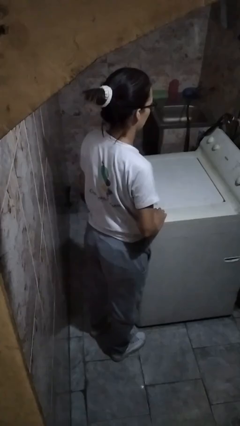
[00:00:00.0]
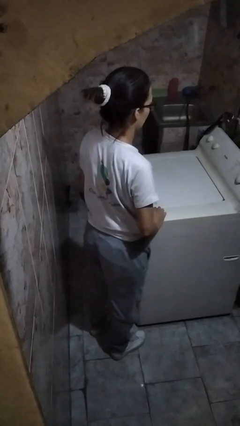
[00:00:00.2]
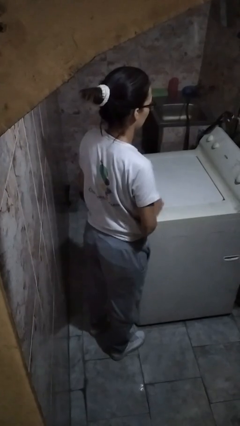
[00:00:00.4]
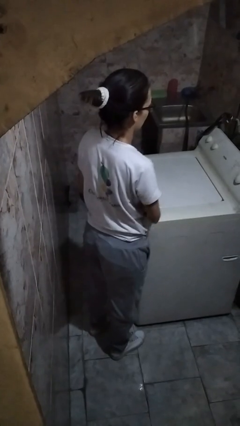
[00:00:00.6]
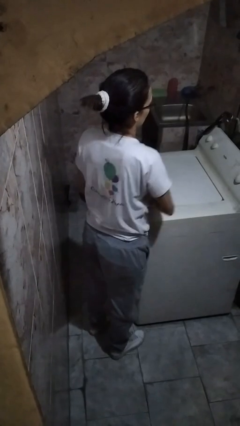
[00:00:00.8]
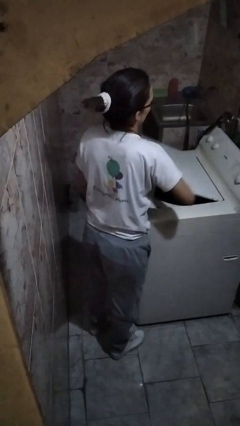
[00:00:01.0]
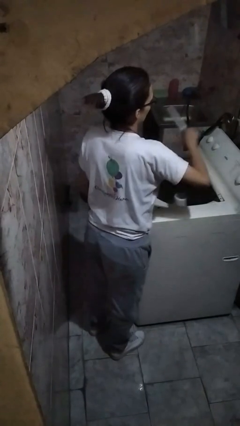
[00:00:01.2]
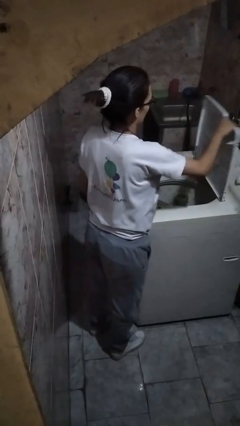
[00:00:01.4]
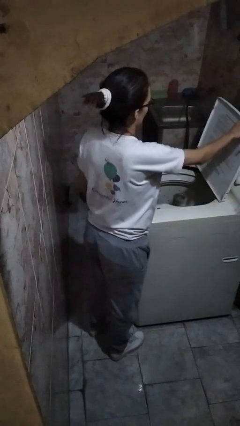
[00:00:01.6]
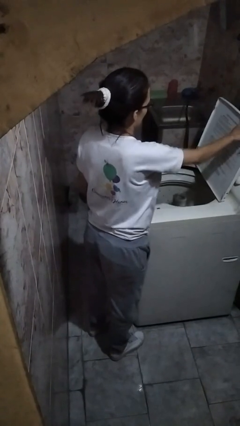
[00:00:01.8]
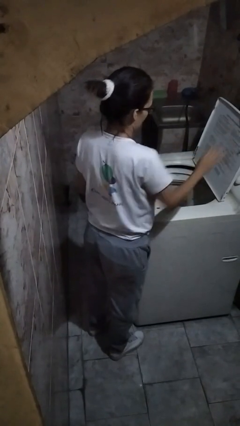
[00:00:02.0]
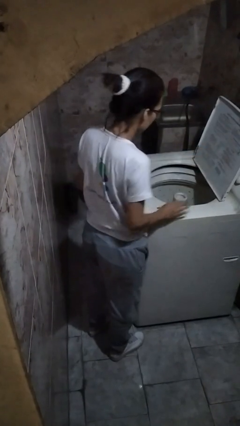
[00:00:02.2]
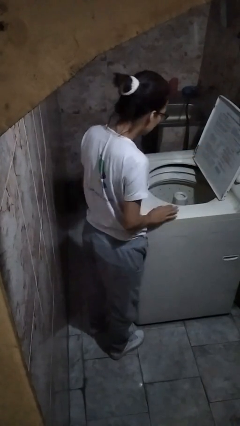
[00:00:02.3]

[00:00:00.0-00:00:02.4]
person opens clothes washer

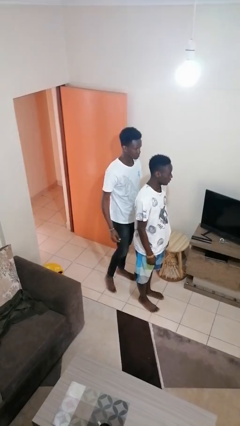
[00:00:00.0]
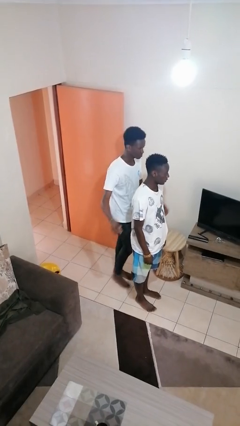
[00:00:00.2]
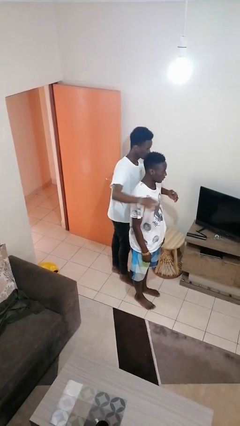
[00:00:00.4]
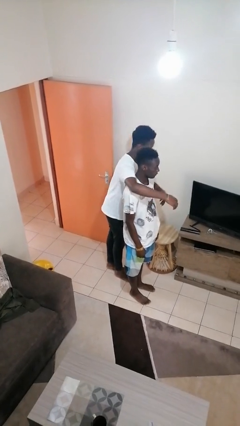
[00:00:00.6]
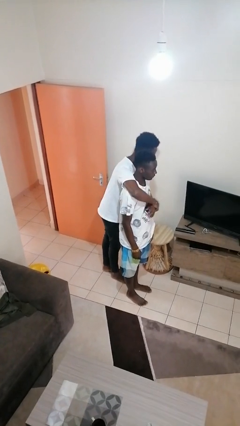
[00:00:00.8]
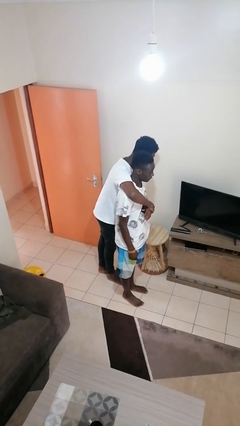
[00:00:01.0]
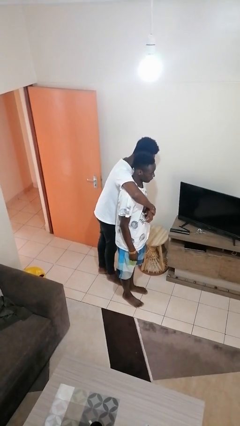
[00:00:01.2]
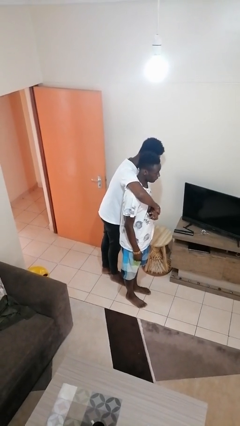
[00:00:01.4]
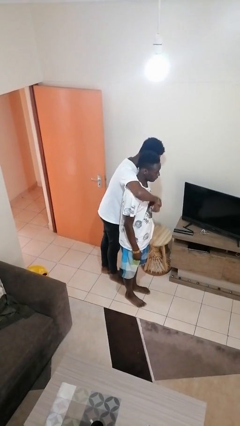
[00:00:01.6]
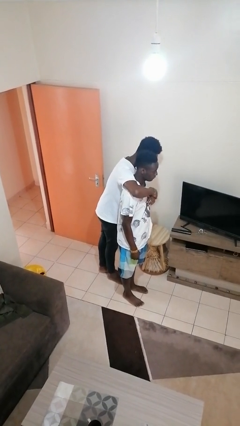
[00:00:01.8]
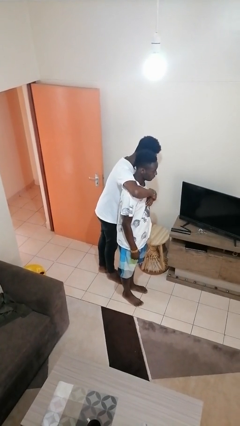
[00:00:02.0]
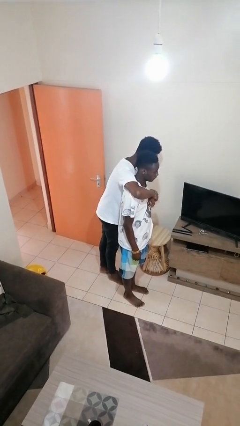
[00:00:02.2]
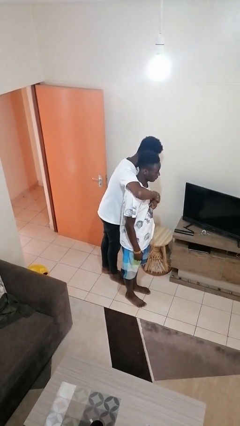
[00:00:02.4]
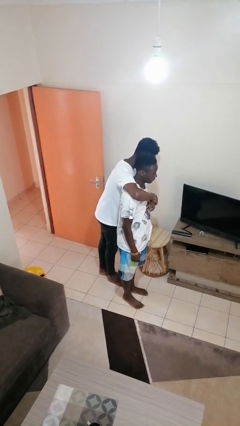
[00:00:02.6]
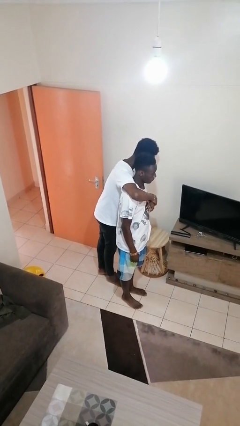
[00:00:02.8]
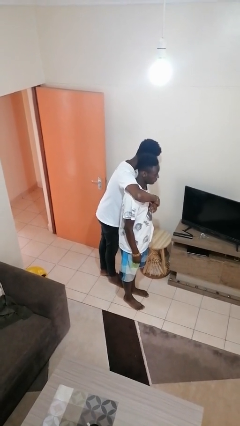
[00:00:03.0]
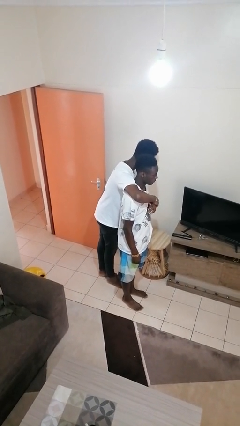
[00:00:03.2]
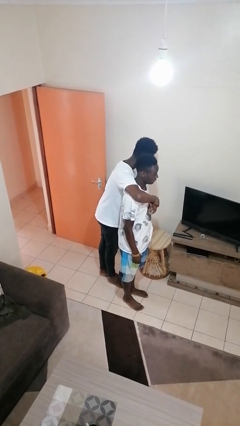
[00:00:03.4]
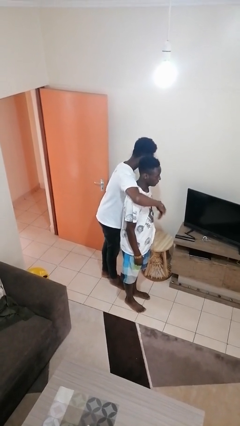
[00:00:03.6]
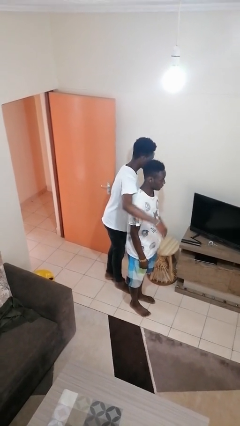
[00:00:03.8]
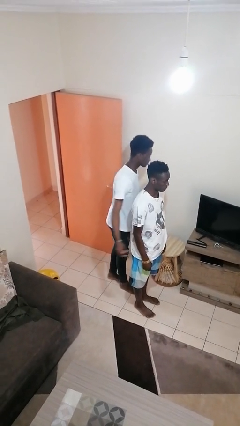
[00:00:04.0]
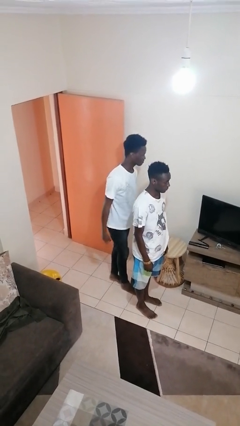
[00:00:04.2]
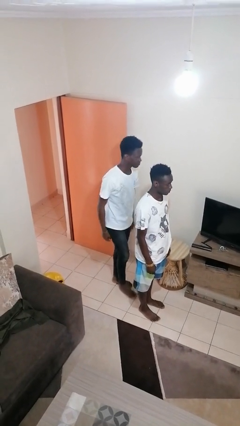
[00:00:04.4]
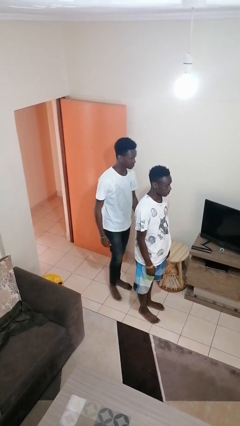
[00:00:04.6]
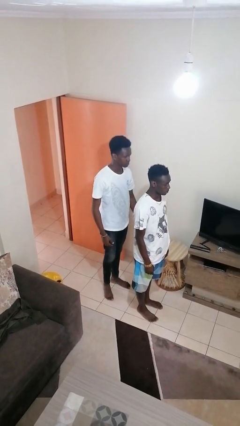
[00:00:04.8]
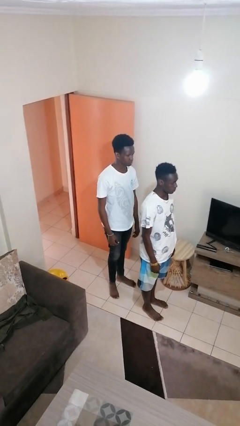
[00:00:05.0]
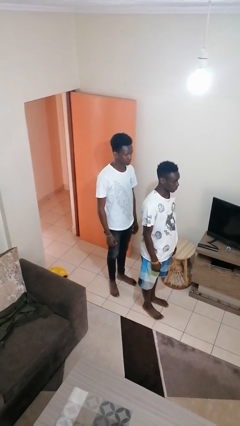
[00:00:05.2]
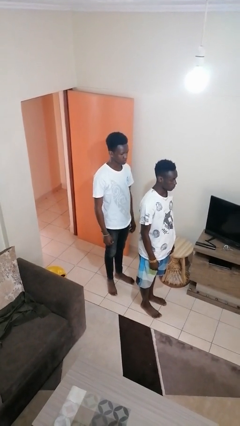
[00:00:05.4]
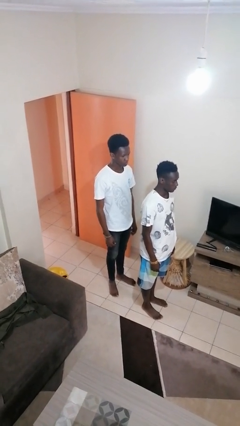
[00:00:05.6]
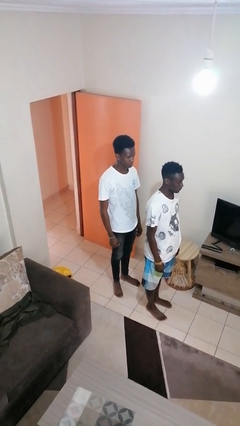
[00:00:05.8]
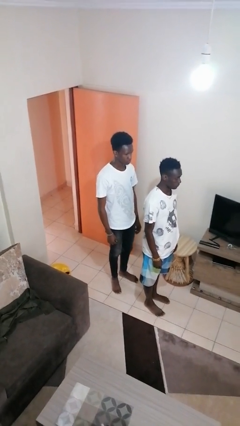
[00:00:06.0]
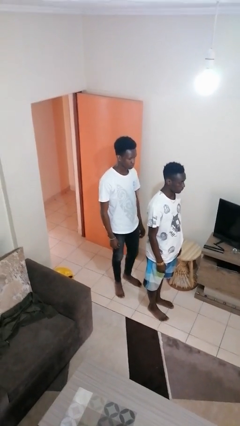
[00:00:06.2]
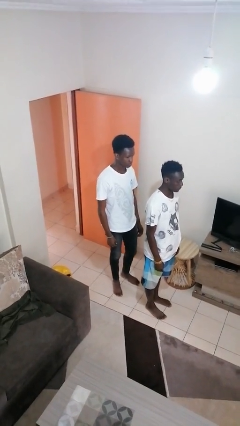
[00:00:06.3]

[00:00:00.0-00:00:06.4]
person hugs person from behind

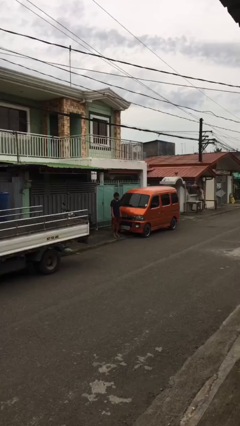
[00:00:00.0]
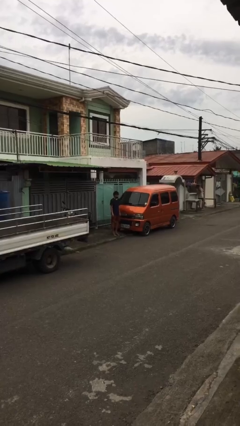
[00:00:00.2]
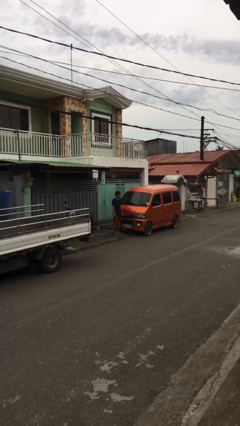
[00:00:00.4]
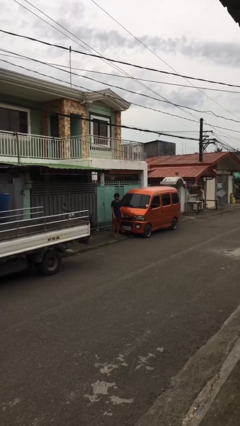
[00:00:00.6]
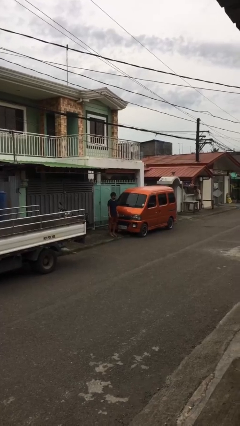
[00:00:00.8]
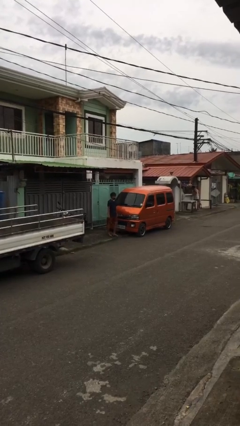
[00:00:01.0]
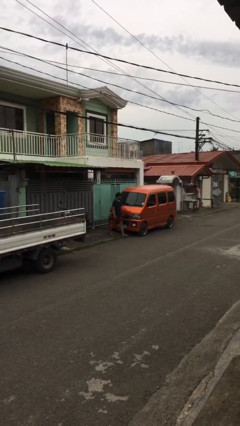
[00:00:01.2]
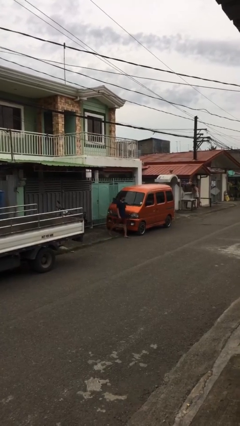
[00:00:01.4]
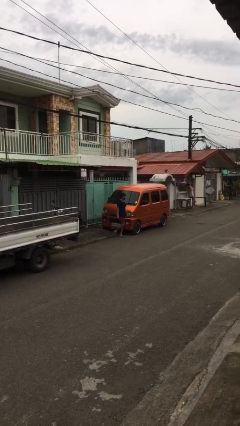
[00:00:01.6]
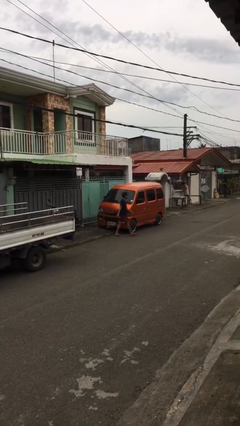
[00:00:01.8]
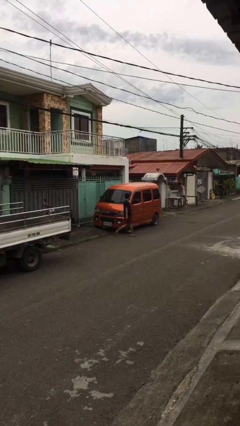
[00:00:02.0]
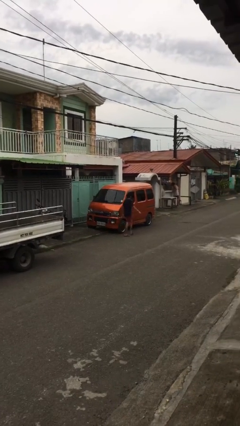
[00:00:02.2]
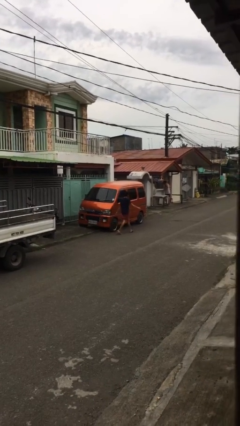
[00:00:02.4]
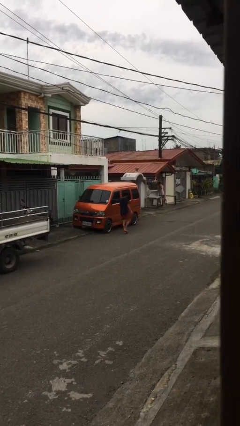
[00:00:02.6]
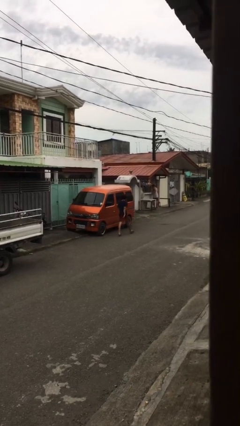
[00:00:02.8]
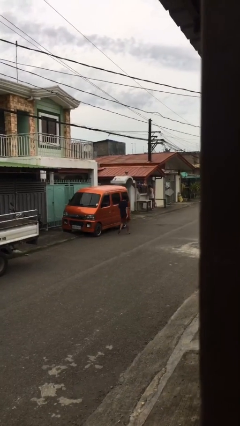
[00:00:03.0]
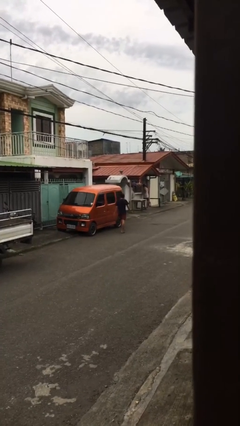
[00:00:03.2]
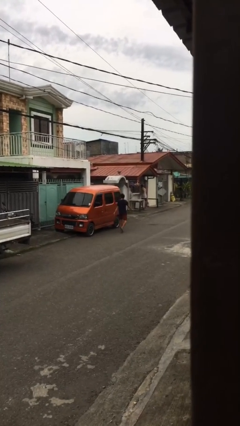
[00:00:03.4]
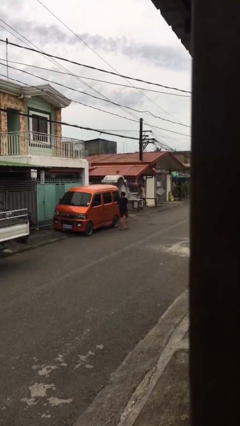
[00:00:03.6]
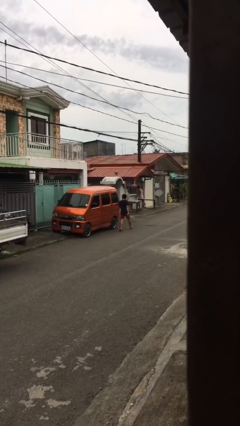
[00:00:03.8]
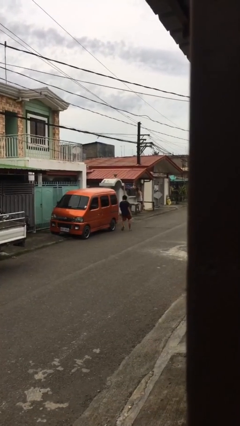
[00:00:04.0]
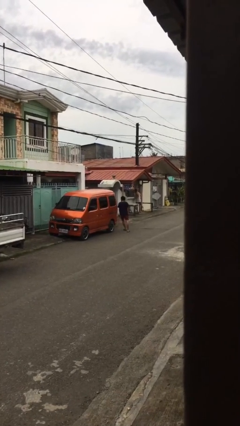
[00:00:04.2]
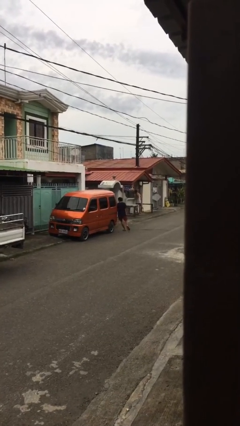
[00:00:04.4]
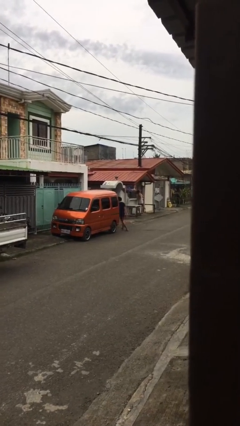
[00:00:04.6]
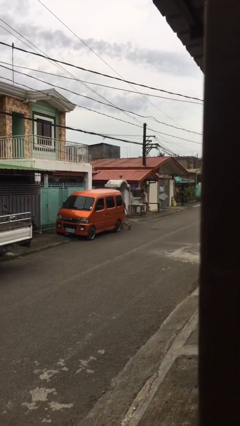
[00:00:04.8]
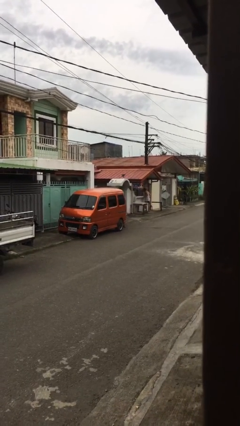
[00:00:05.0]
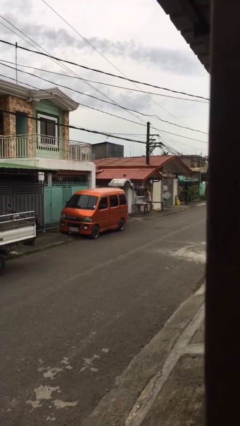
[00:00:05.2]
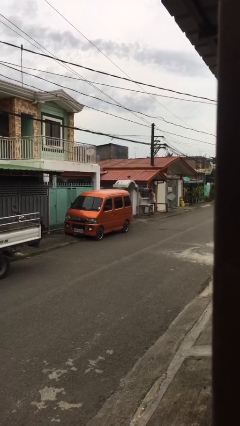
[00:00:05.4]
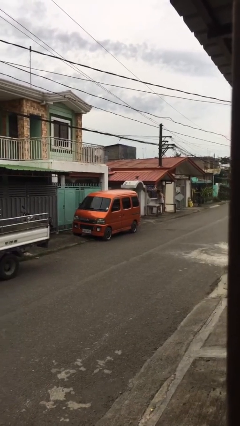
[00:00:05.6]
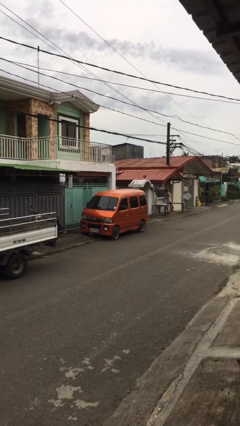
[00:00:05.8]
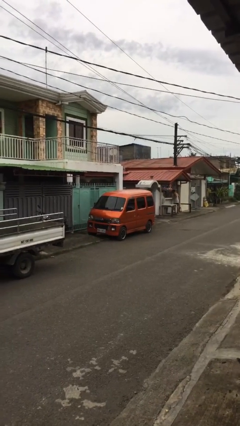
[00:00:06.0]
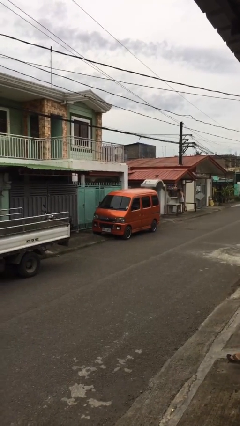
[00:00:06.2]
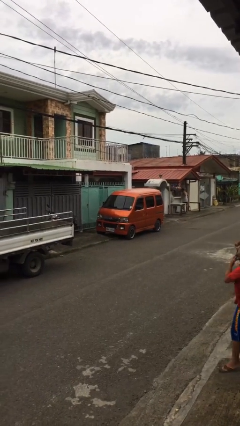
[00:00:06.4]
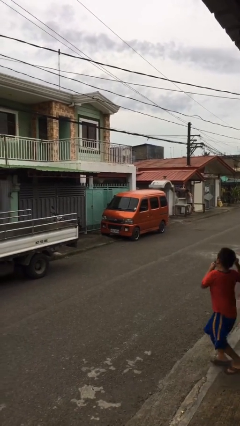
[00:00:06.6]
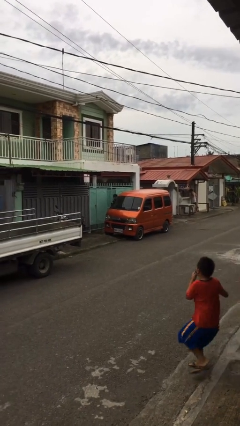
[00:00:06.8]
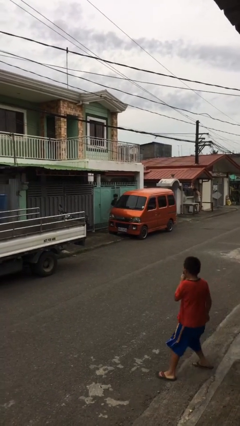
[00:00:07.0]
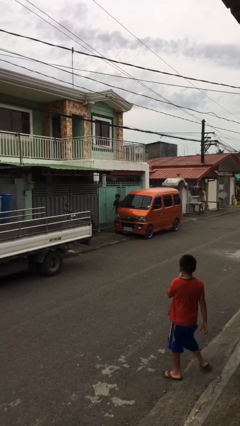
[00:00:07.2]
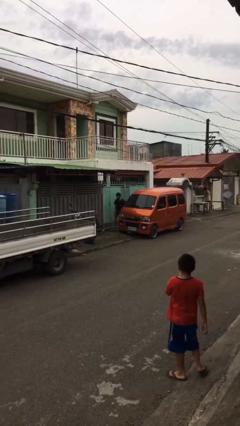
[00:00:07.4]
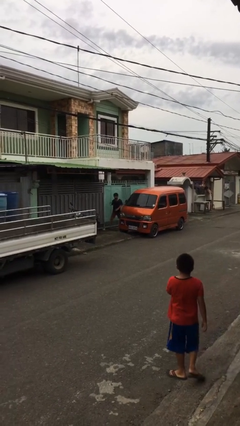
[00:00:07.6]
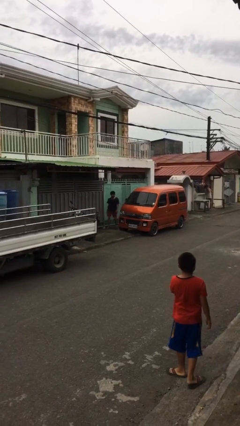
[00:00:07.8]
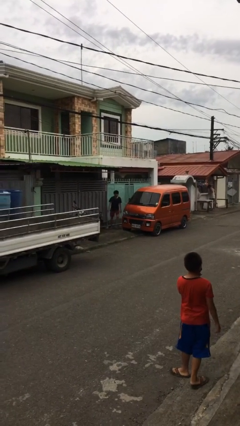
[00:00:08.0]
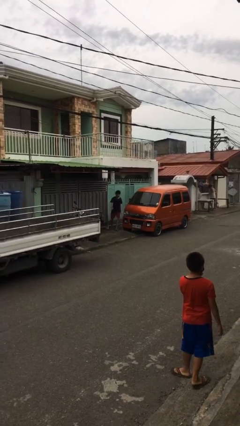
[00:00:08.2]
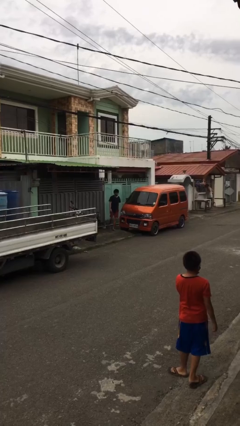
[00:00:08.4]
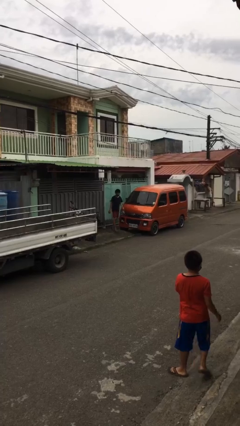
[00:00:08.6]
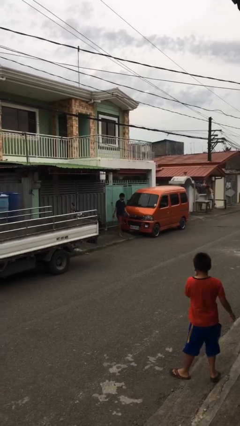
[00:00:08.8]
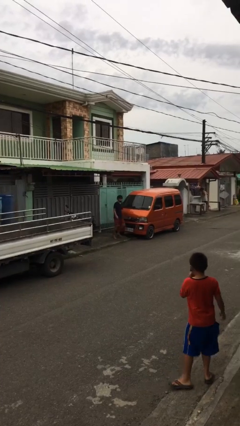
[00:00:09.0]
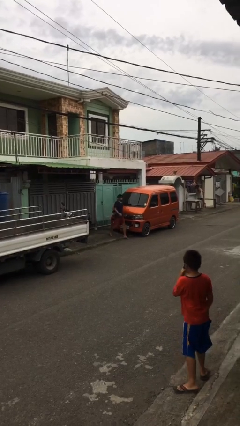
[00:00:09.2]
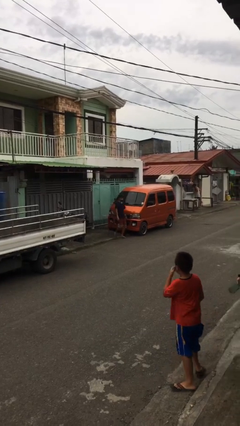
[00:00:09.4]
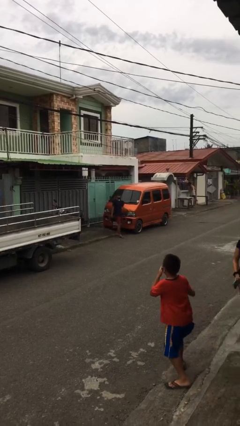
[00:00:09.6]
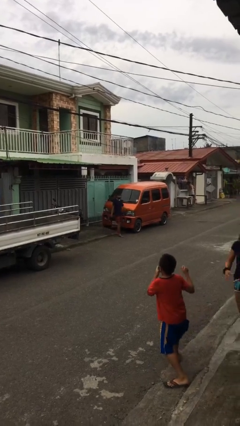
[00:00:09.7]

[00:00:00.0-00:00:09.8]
person walks around car
